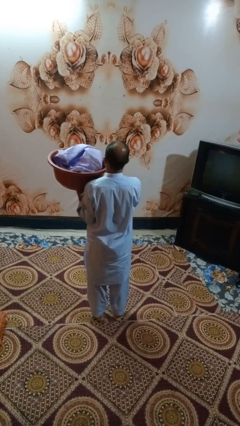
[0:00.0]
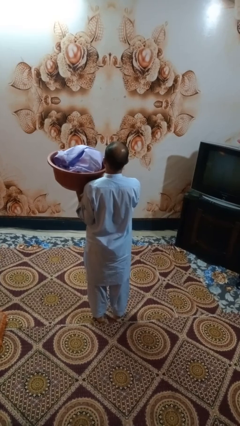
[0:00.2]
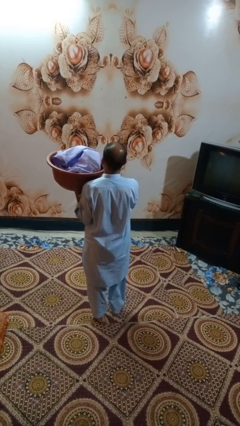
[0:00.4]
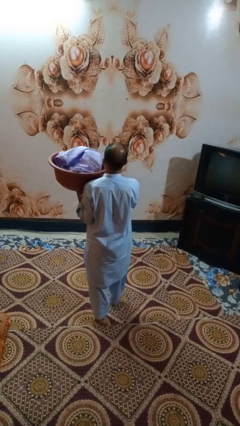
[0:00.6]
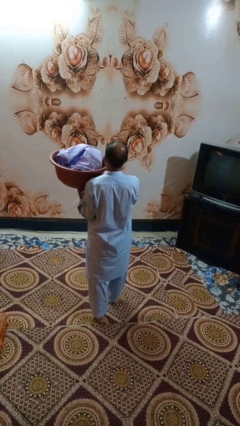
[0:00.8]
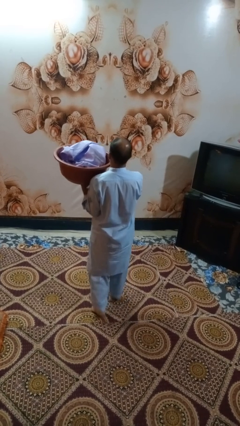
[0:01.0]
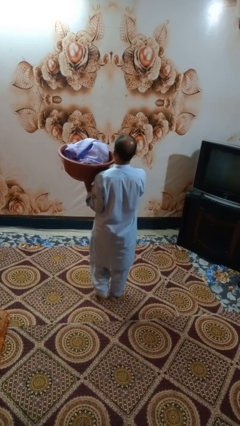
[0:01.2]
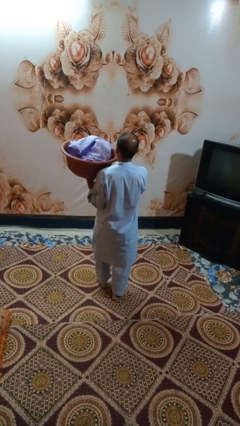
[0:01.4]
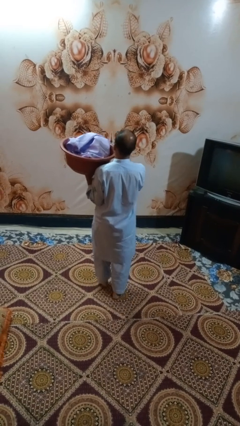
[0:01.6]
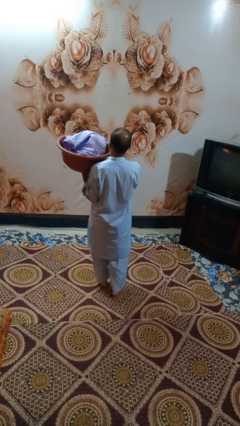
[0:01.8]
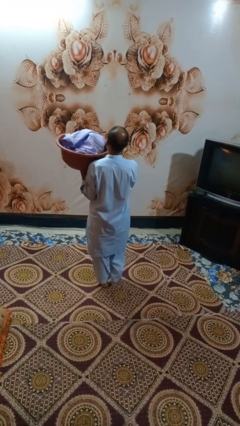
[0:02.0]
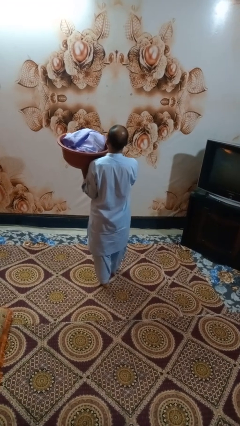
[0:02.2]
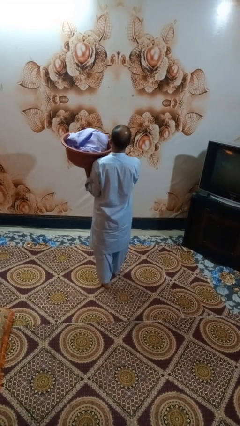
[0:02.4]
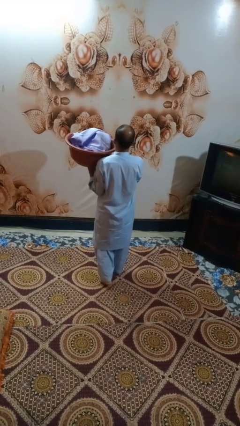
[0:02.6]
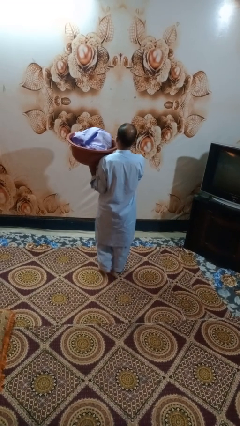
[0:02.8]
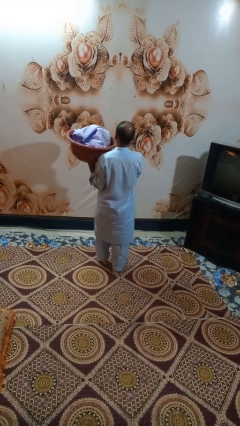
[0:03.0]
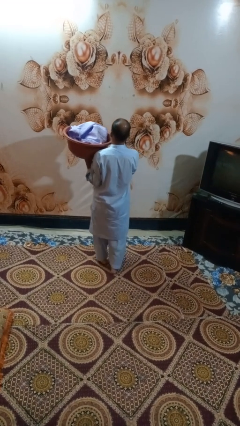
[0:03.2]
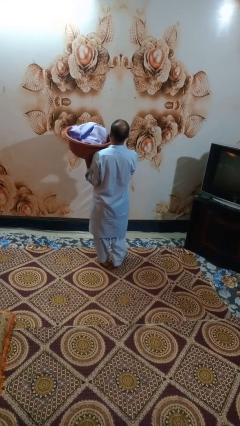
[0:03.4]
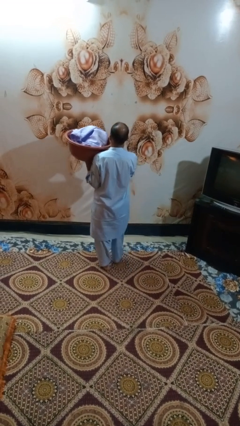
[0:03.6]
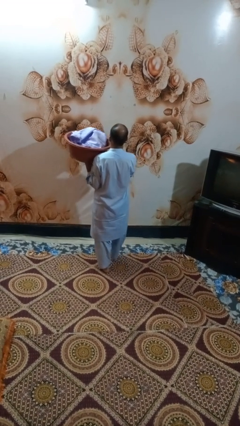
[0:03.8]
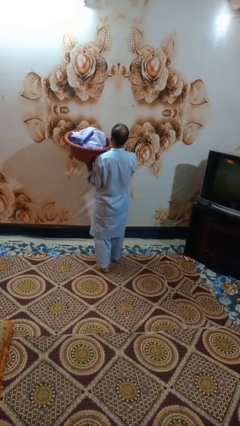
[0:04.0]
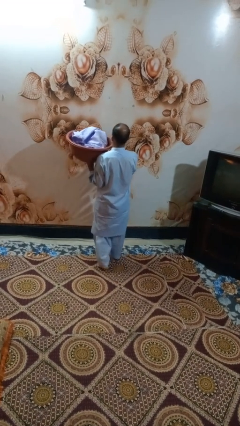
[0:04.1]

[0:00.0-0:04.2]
person carries laundry basket

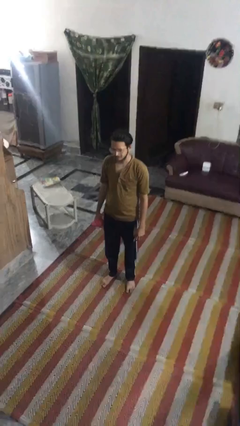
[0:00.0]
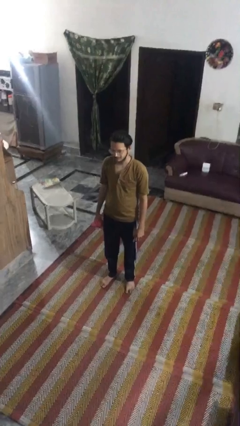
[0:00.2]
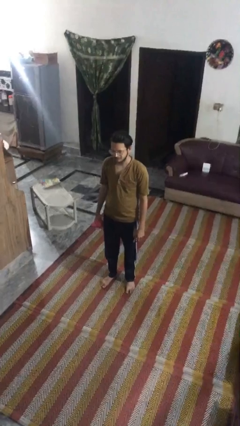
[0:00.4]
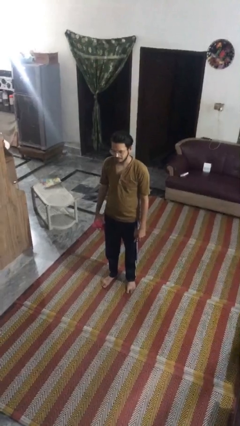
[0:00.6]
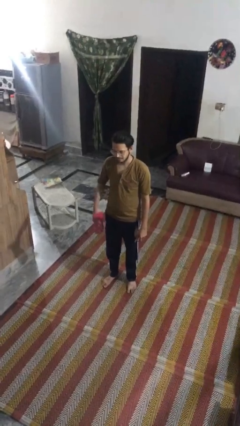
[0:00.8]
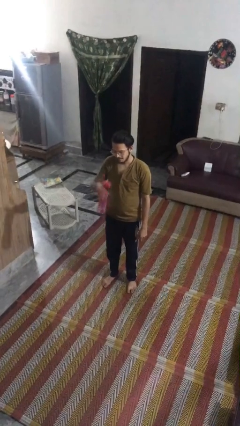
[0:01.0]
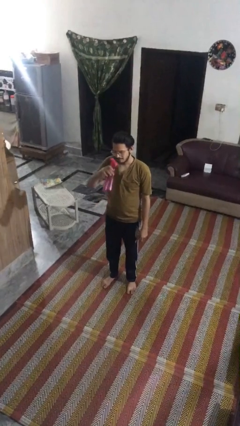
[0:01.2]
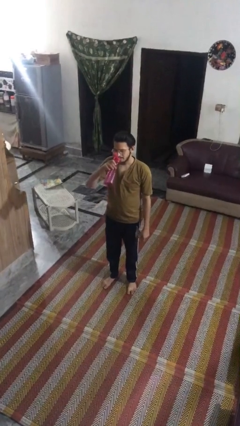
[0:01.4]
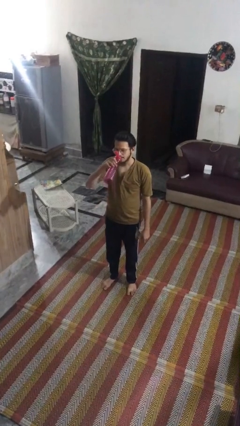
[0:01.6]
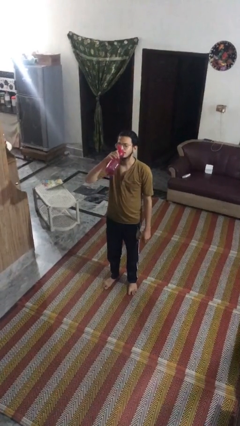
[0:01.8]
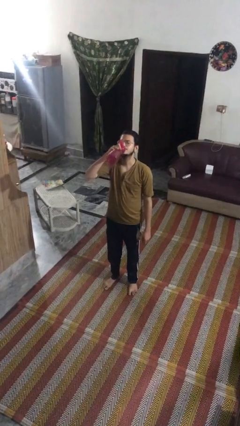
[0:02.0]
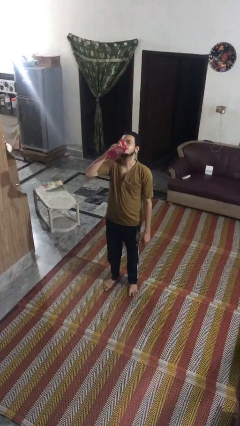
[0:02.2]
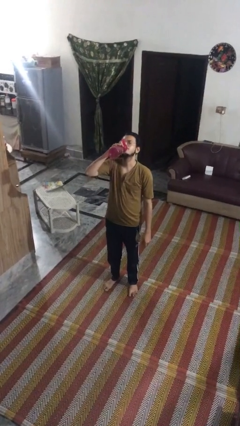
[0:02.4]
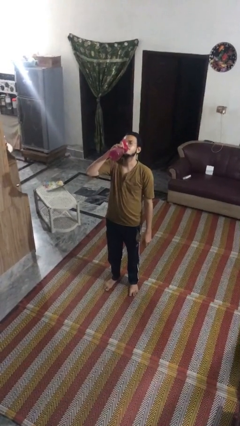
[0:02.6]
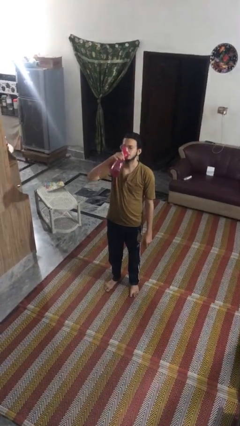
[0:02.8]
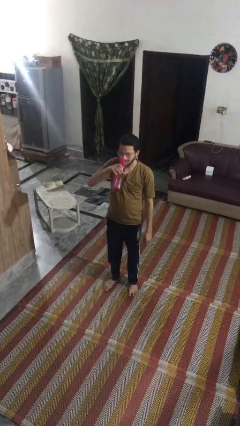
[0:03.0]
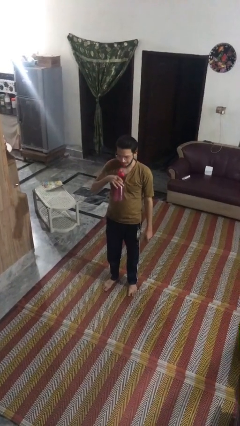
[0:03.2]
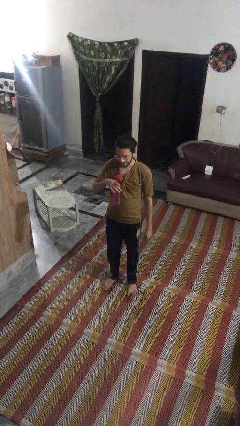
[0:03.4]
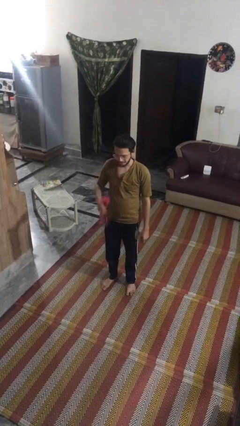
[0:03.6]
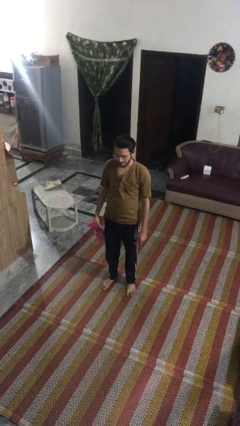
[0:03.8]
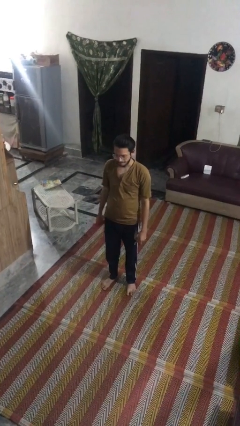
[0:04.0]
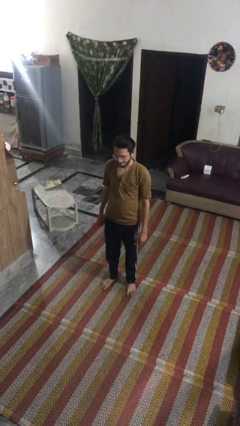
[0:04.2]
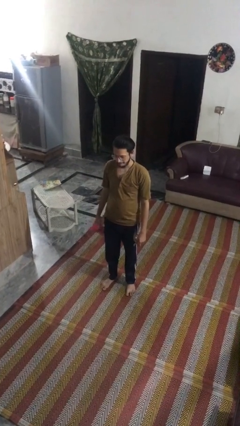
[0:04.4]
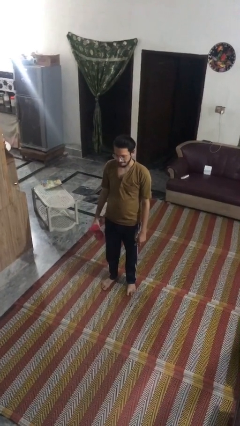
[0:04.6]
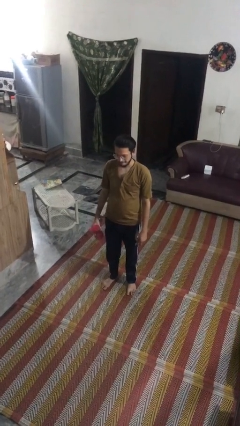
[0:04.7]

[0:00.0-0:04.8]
person drinks from bottle

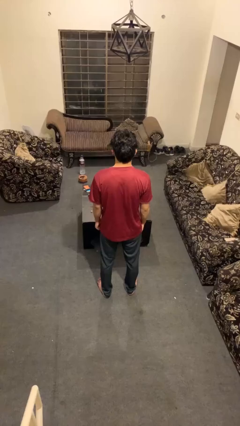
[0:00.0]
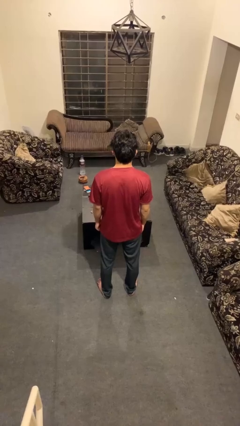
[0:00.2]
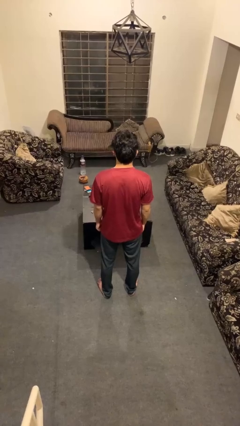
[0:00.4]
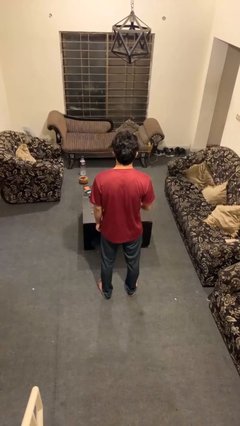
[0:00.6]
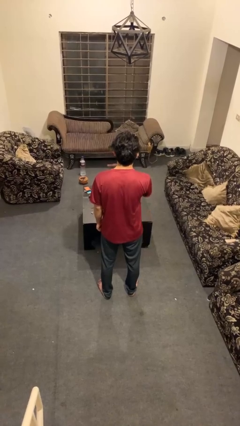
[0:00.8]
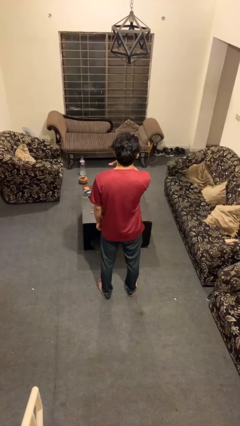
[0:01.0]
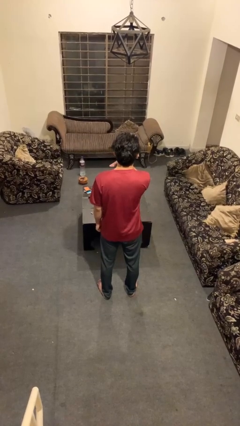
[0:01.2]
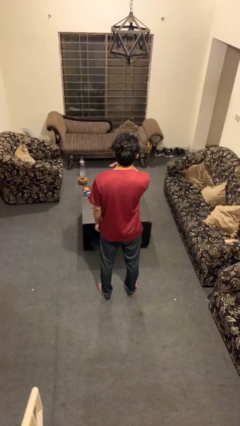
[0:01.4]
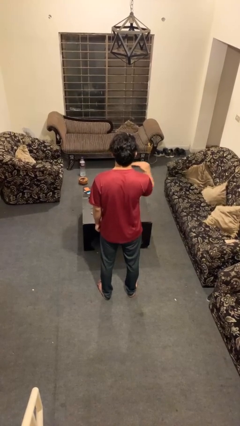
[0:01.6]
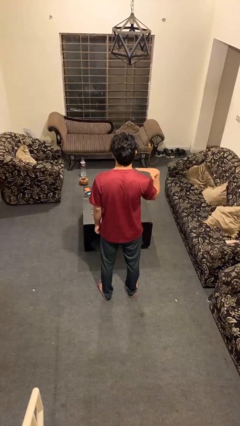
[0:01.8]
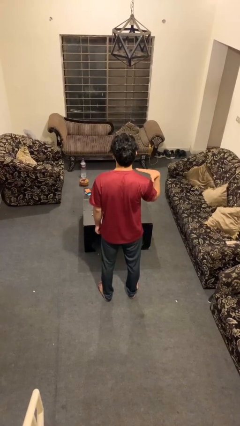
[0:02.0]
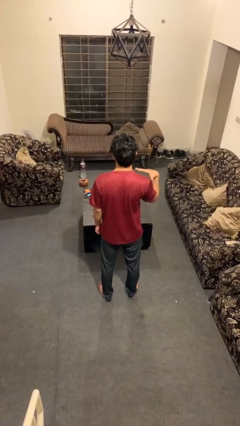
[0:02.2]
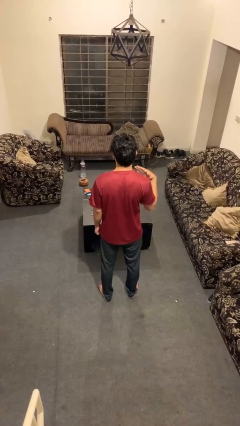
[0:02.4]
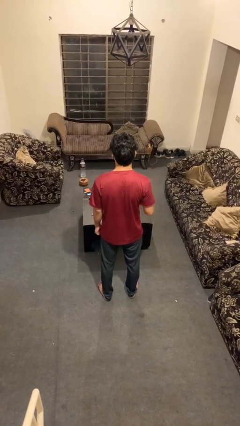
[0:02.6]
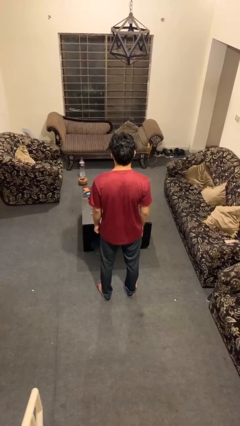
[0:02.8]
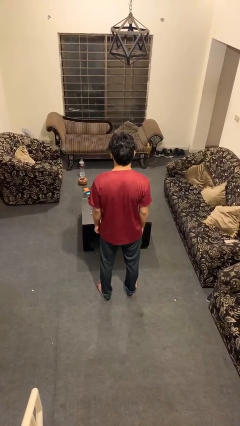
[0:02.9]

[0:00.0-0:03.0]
person gestures cut

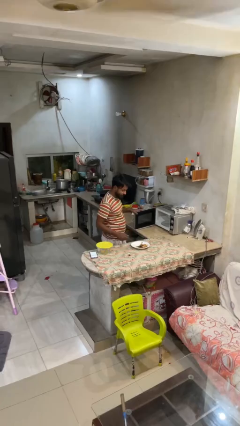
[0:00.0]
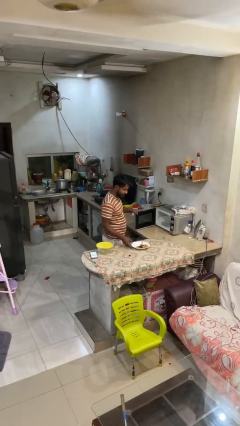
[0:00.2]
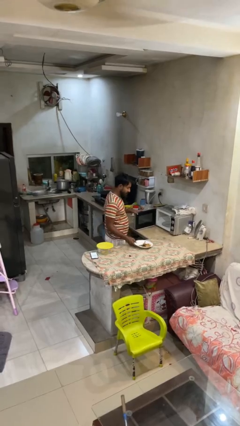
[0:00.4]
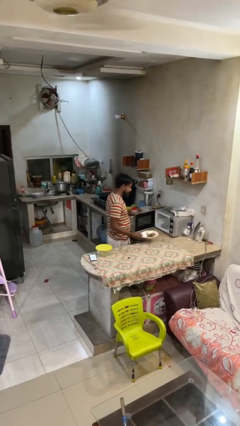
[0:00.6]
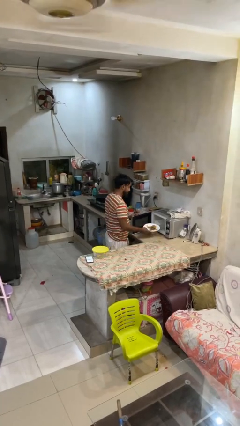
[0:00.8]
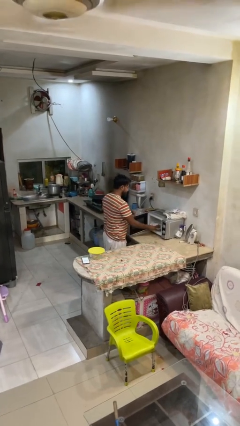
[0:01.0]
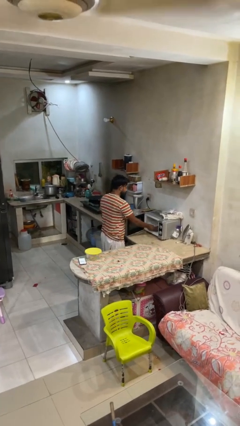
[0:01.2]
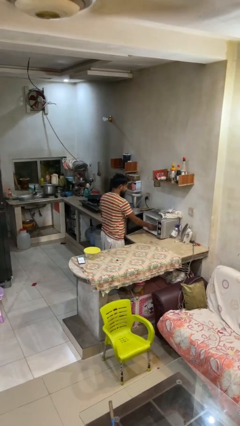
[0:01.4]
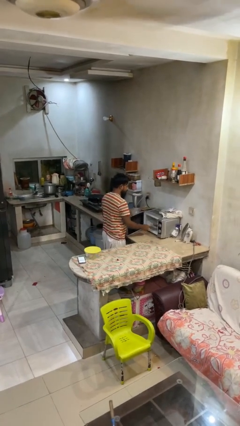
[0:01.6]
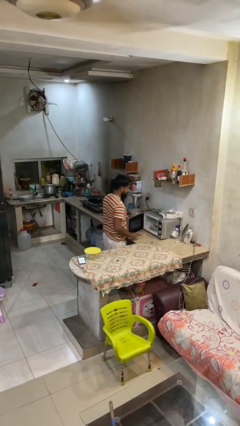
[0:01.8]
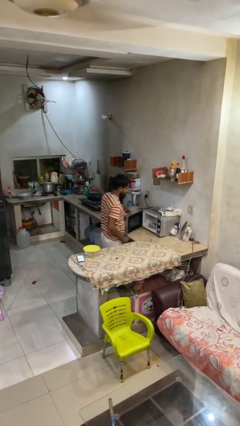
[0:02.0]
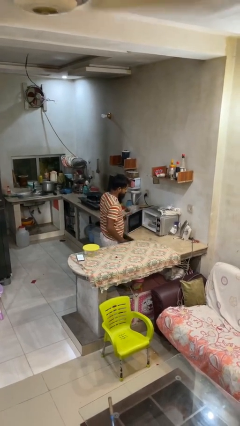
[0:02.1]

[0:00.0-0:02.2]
person puts object into microwave

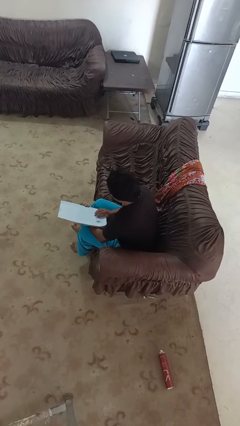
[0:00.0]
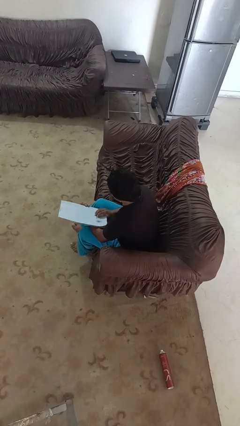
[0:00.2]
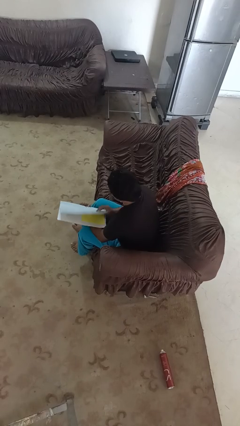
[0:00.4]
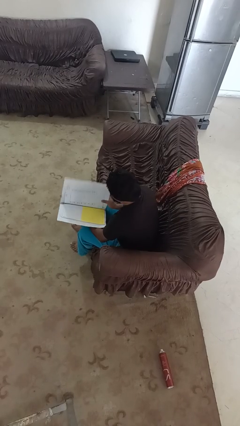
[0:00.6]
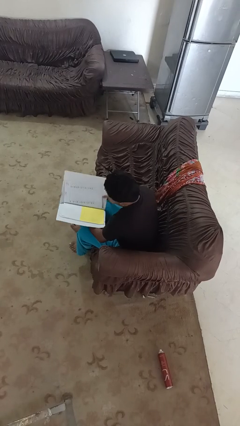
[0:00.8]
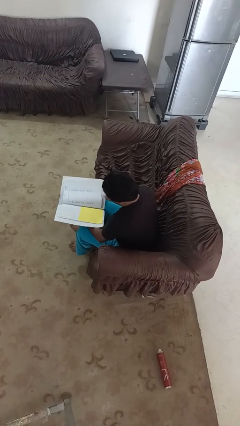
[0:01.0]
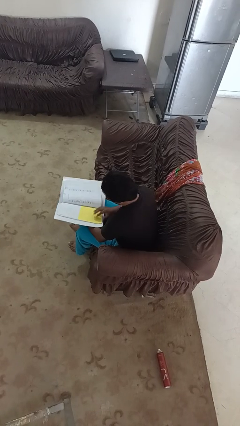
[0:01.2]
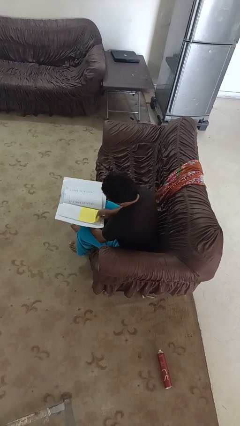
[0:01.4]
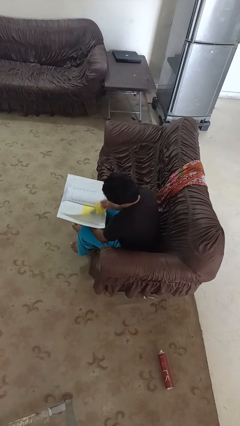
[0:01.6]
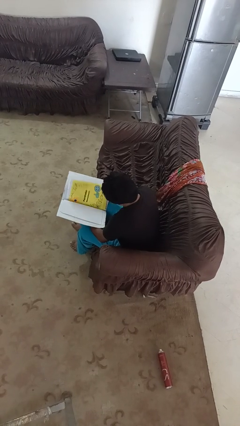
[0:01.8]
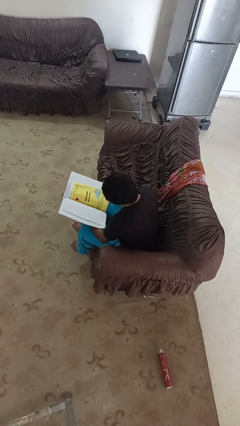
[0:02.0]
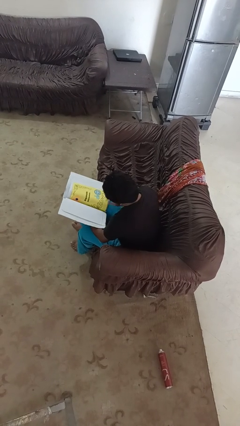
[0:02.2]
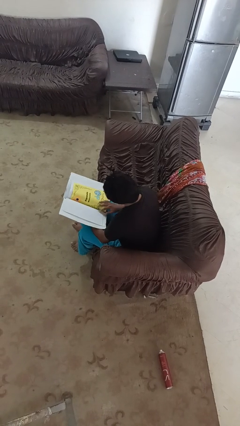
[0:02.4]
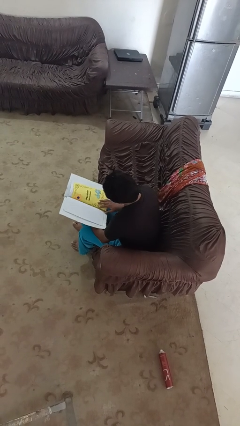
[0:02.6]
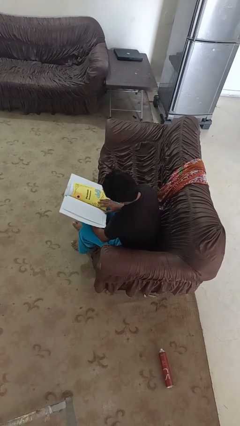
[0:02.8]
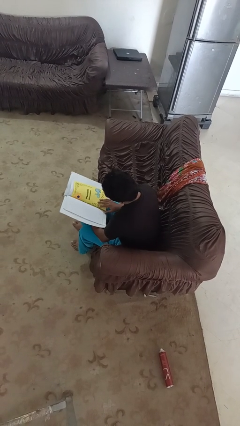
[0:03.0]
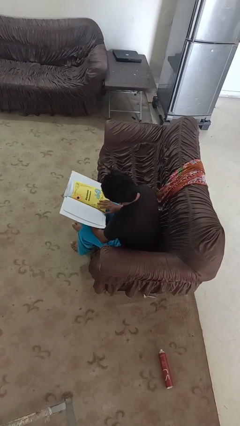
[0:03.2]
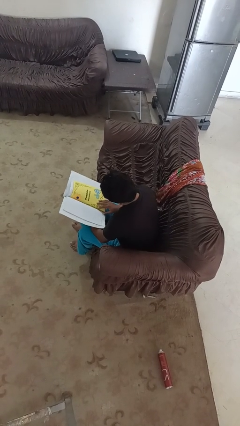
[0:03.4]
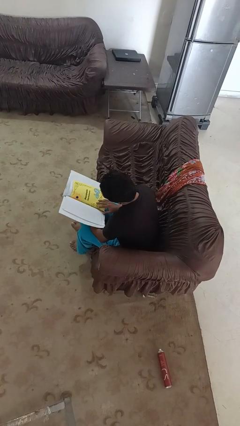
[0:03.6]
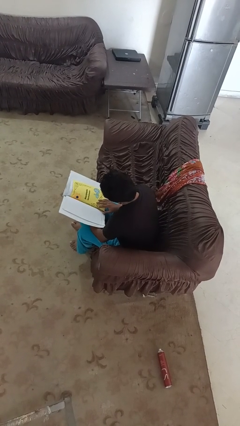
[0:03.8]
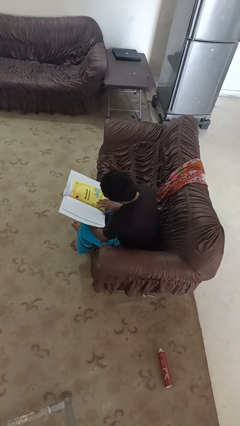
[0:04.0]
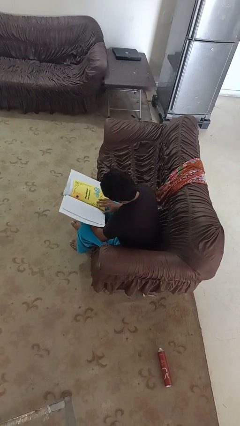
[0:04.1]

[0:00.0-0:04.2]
person reads magazine
